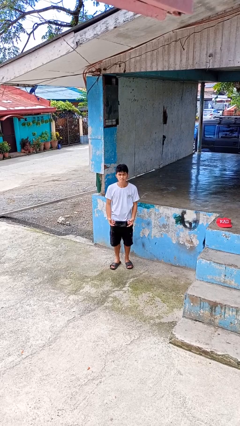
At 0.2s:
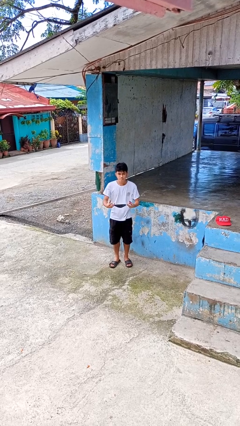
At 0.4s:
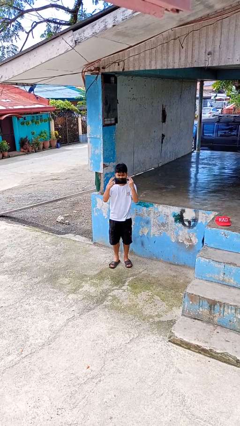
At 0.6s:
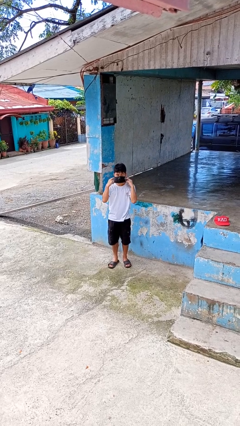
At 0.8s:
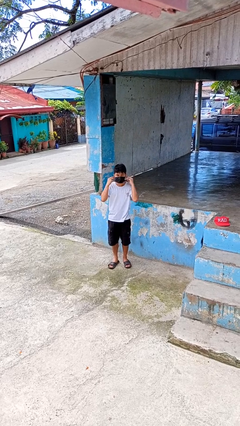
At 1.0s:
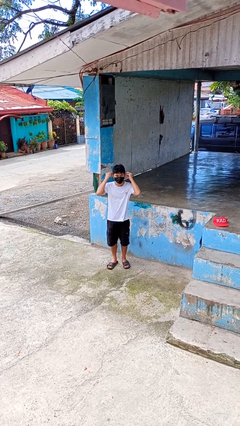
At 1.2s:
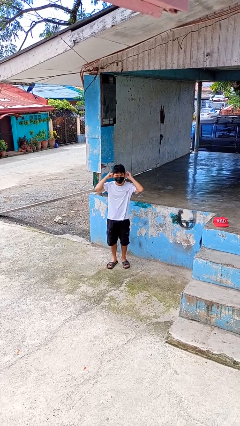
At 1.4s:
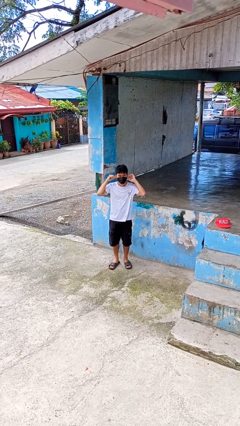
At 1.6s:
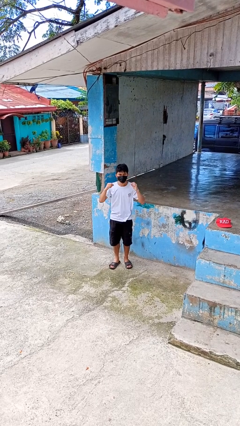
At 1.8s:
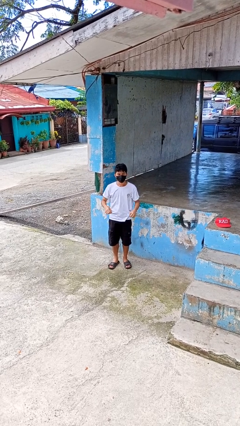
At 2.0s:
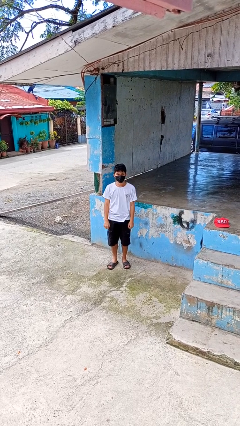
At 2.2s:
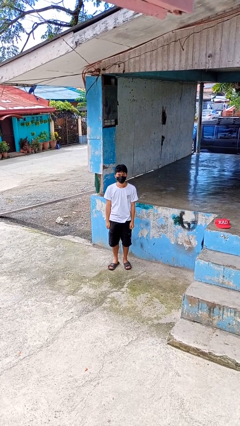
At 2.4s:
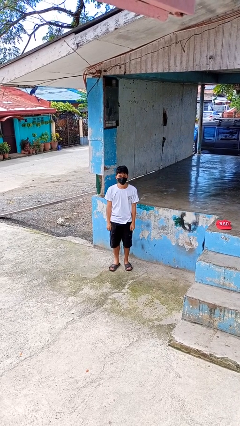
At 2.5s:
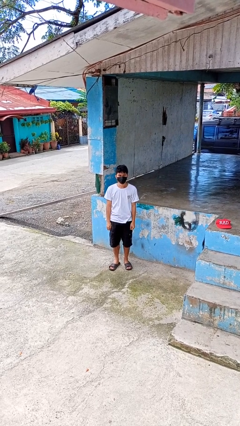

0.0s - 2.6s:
person puts on facemask

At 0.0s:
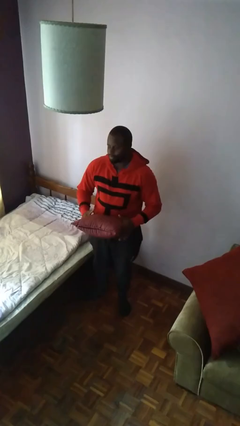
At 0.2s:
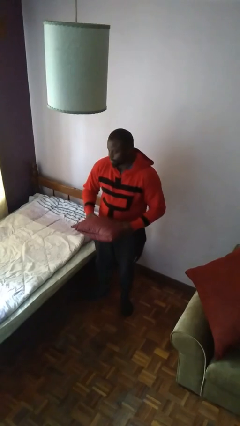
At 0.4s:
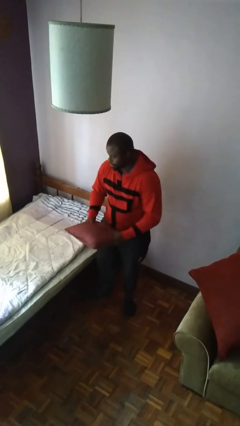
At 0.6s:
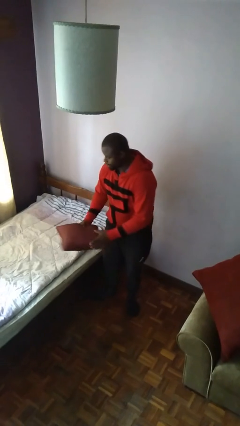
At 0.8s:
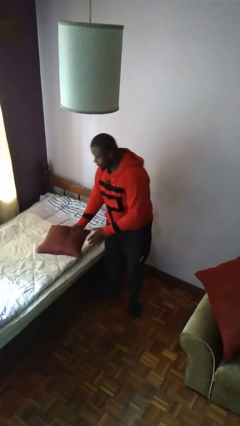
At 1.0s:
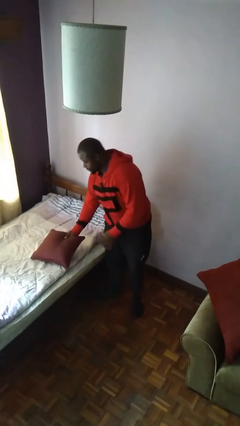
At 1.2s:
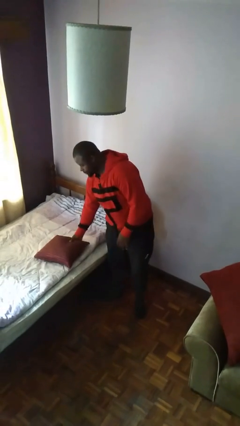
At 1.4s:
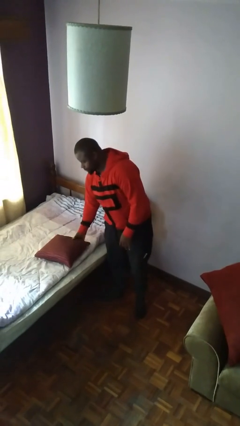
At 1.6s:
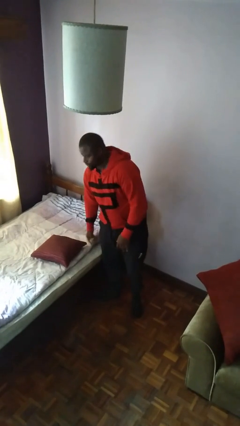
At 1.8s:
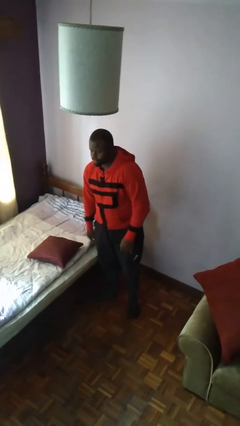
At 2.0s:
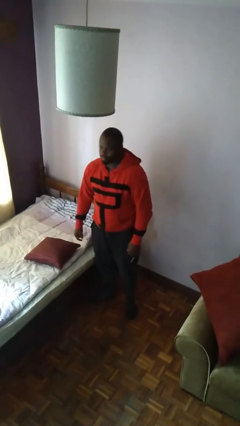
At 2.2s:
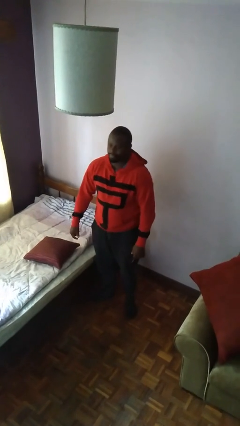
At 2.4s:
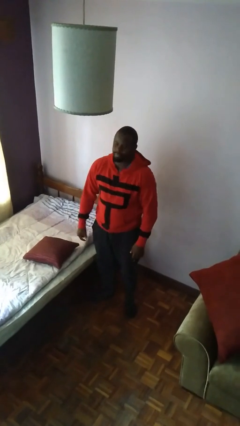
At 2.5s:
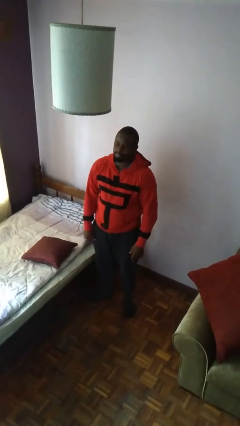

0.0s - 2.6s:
person puts down object on bed

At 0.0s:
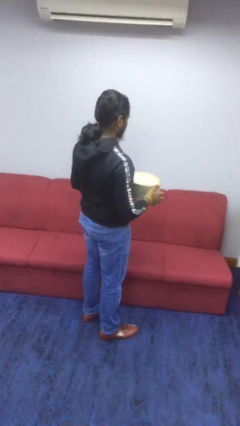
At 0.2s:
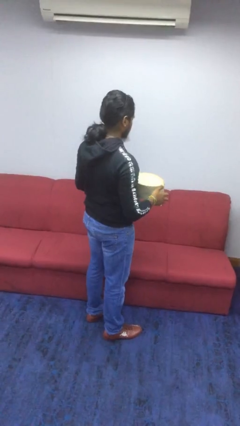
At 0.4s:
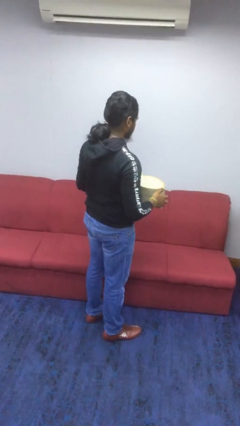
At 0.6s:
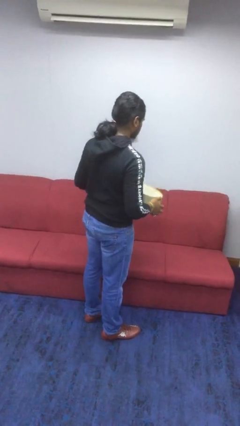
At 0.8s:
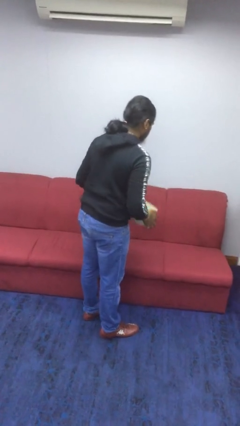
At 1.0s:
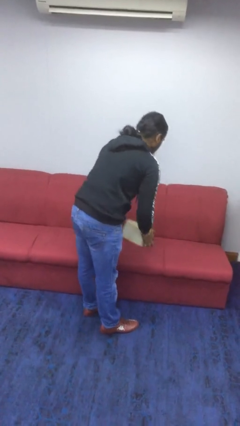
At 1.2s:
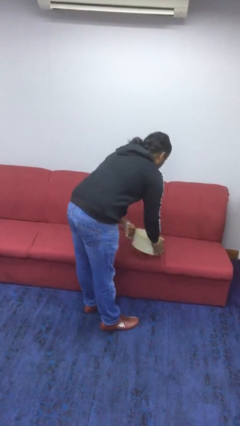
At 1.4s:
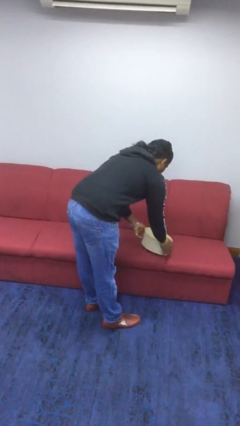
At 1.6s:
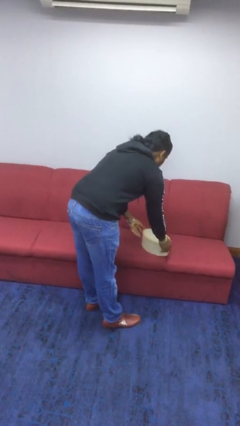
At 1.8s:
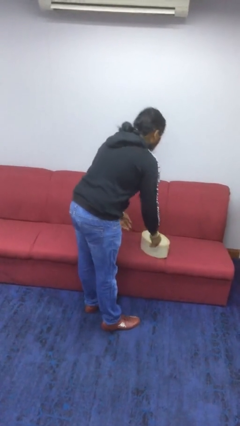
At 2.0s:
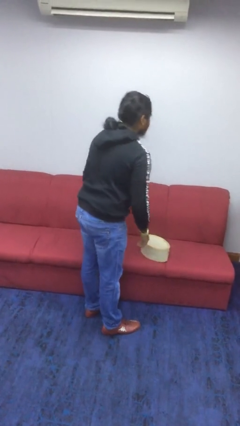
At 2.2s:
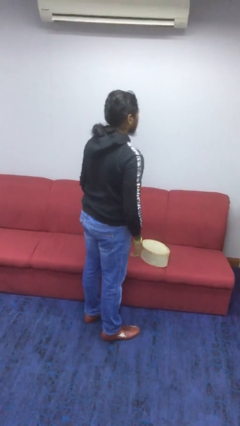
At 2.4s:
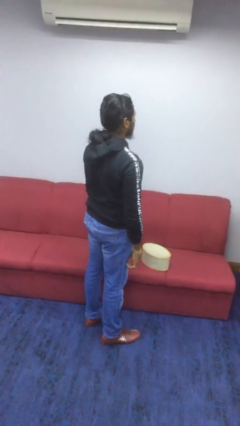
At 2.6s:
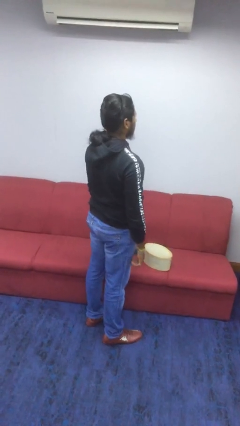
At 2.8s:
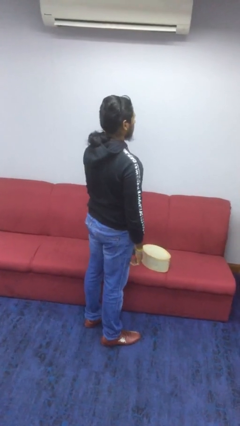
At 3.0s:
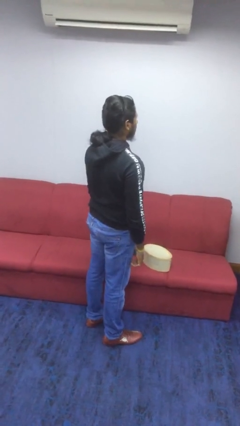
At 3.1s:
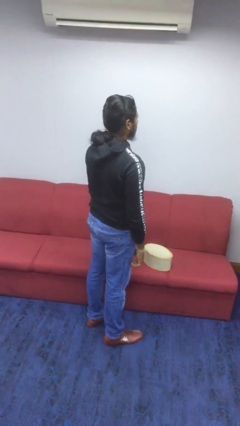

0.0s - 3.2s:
person puts down object on couch

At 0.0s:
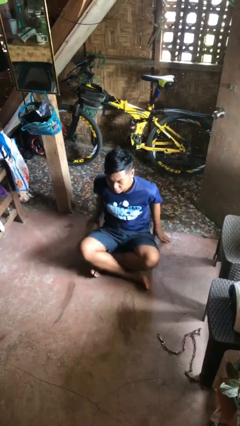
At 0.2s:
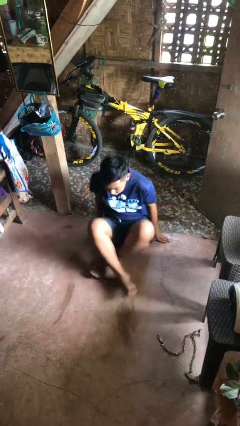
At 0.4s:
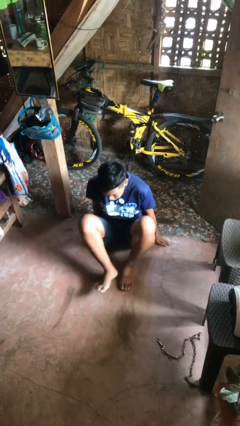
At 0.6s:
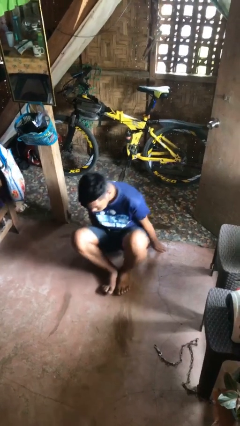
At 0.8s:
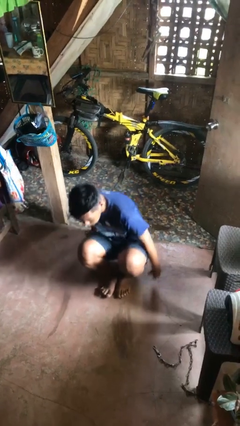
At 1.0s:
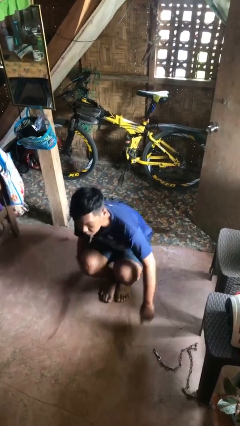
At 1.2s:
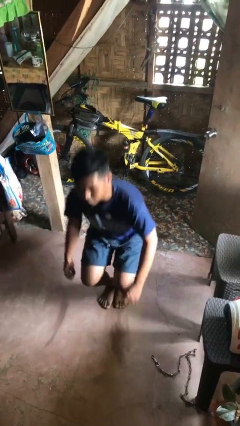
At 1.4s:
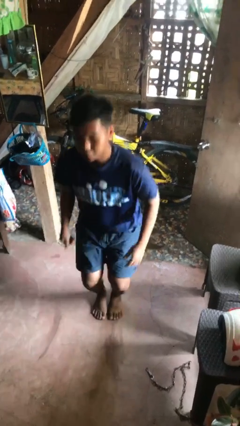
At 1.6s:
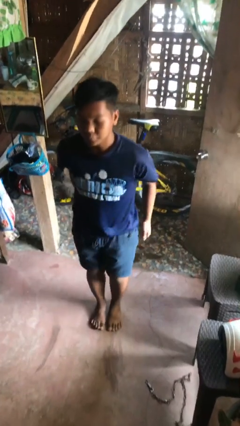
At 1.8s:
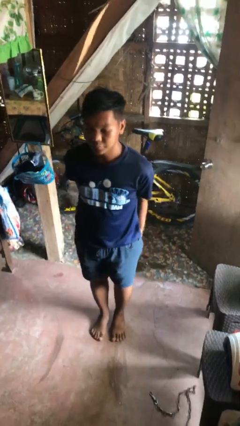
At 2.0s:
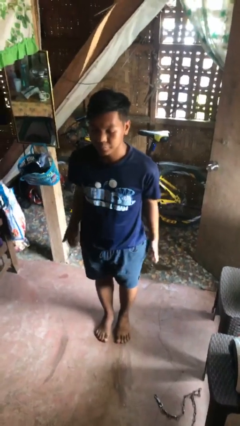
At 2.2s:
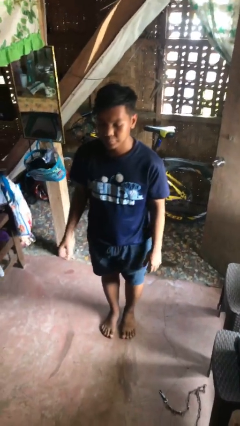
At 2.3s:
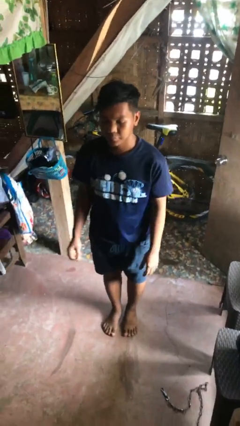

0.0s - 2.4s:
person stands up from floor

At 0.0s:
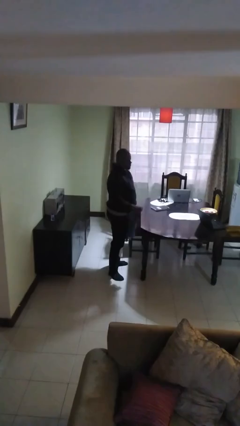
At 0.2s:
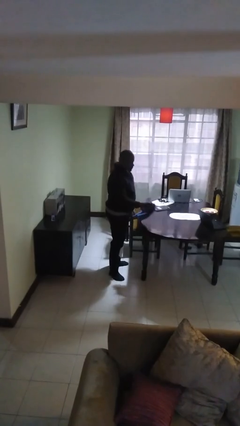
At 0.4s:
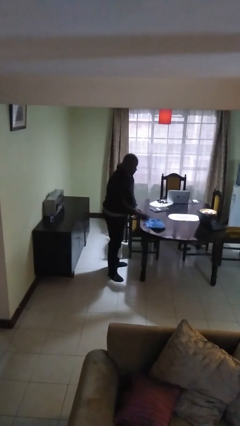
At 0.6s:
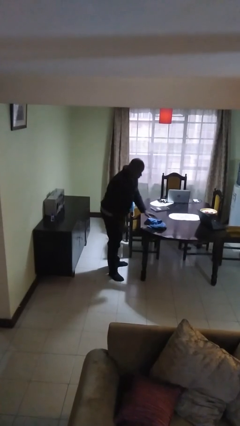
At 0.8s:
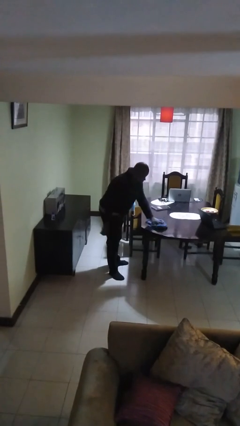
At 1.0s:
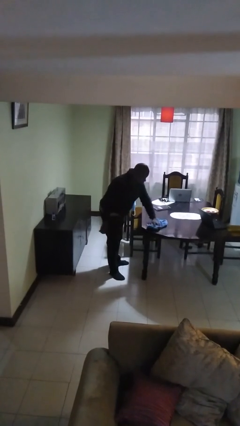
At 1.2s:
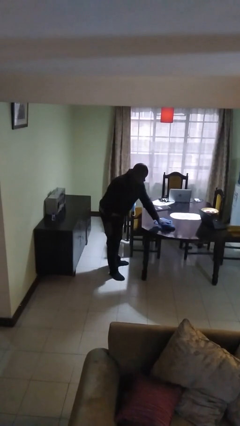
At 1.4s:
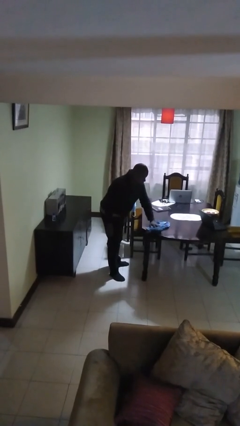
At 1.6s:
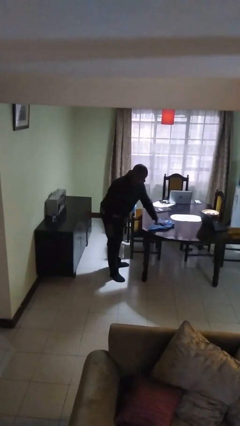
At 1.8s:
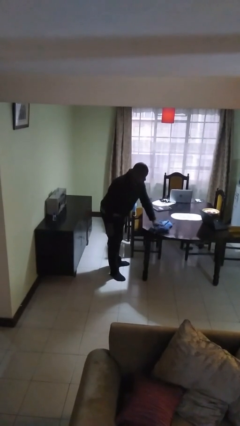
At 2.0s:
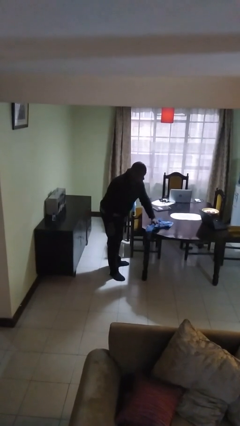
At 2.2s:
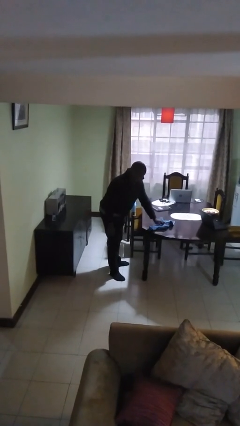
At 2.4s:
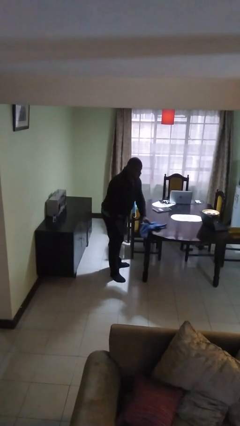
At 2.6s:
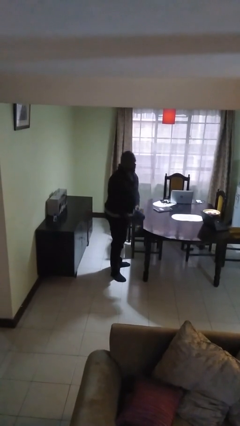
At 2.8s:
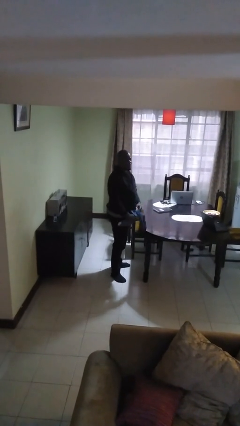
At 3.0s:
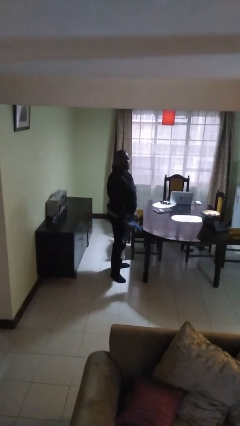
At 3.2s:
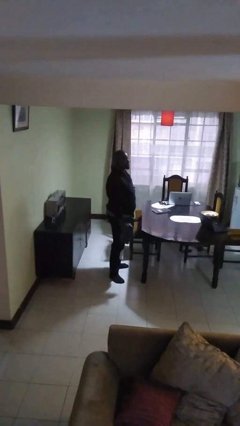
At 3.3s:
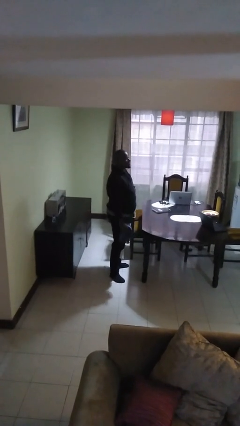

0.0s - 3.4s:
person cleans table with rag

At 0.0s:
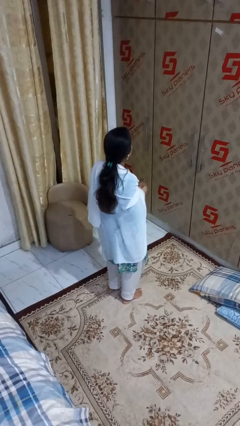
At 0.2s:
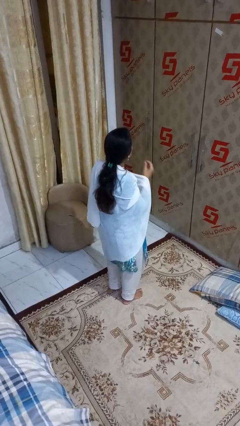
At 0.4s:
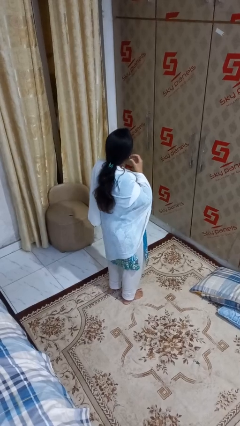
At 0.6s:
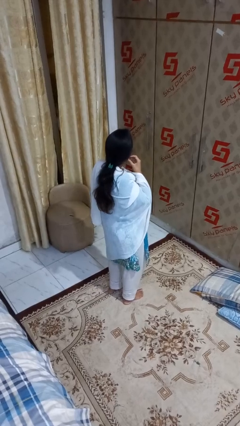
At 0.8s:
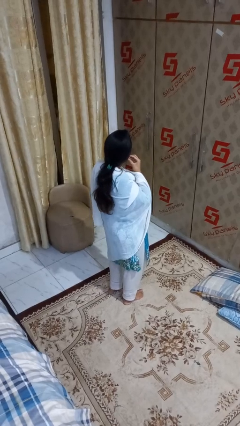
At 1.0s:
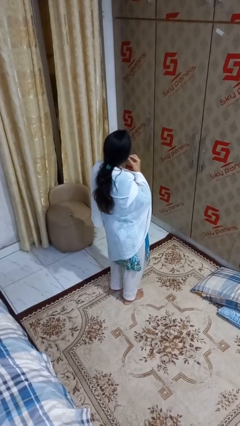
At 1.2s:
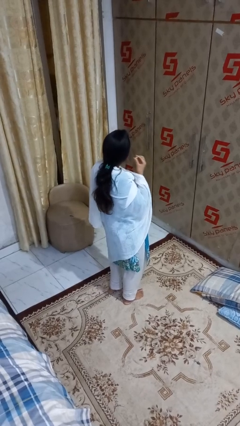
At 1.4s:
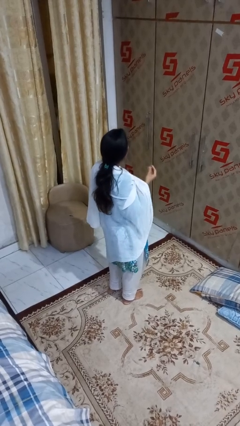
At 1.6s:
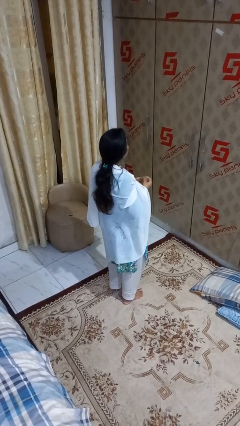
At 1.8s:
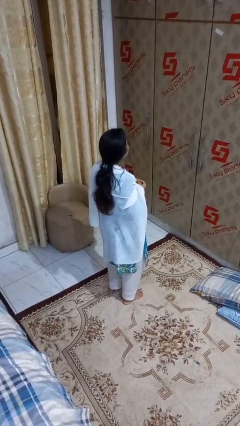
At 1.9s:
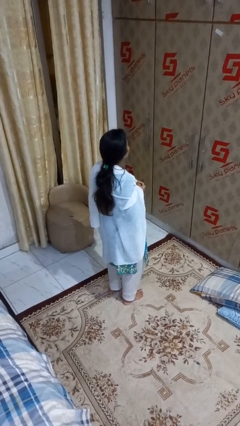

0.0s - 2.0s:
person takes off earrings

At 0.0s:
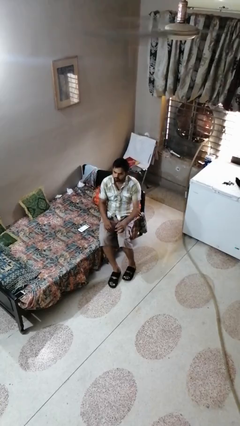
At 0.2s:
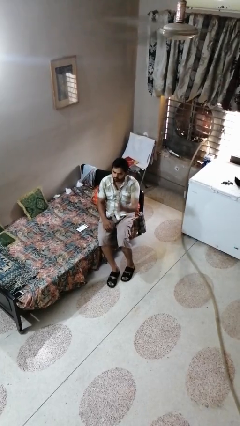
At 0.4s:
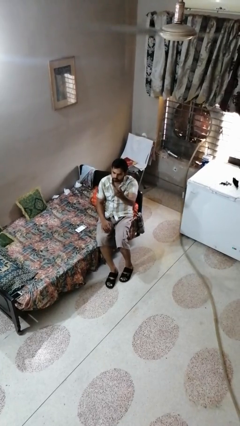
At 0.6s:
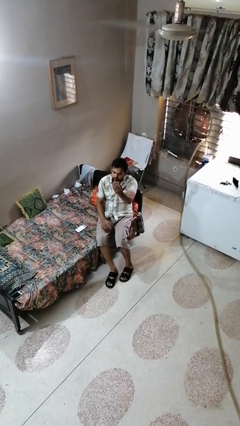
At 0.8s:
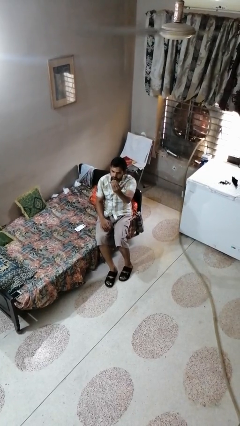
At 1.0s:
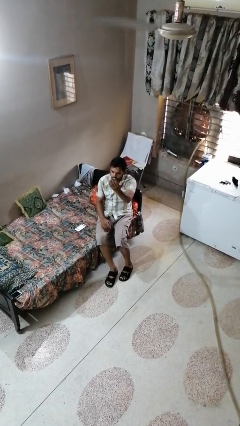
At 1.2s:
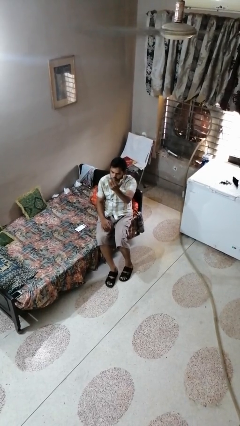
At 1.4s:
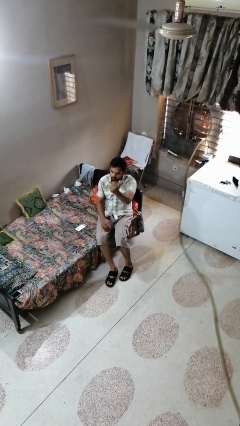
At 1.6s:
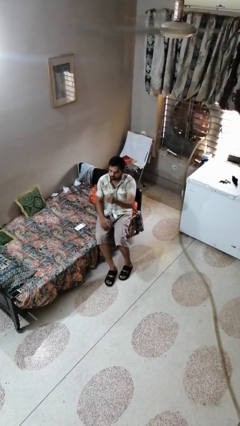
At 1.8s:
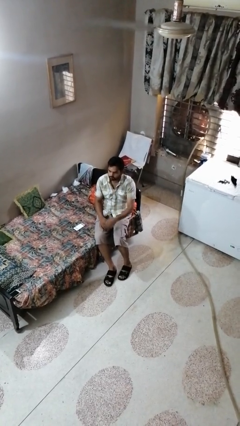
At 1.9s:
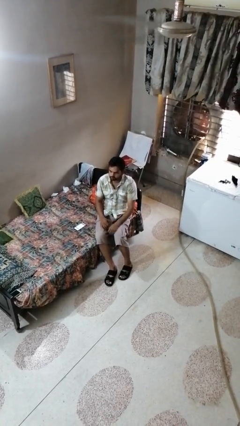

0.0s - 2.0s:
person gestures come here
